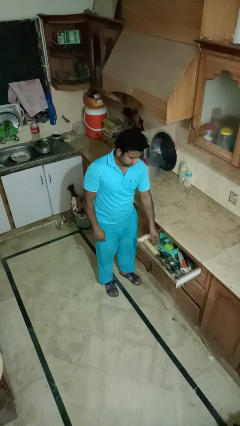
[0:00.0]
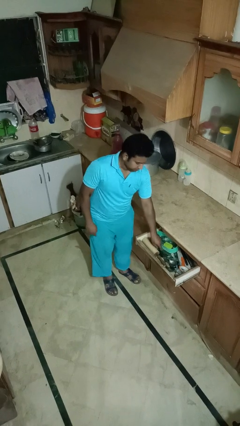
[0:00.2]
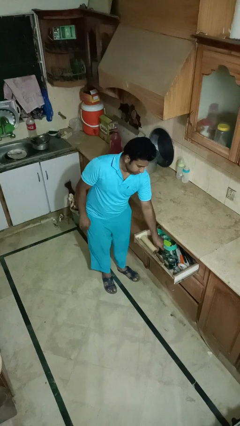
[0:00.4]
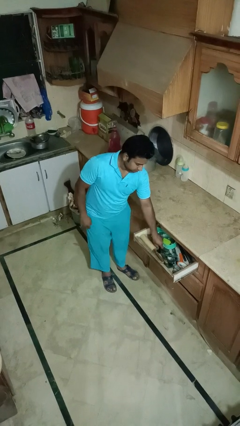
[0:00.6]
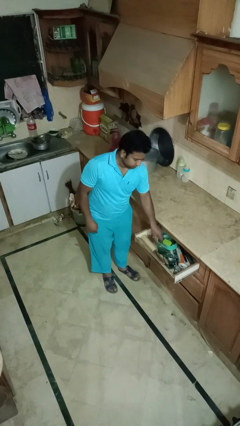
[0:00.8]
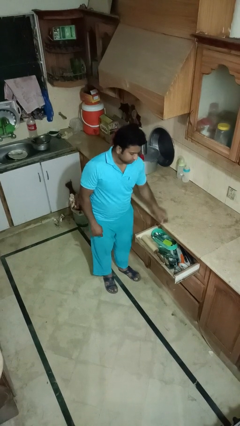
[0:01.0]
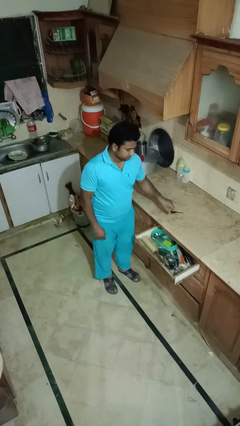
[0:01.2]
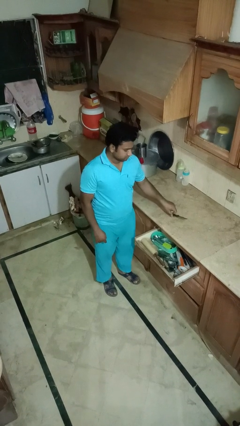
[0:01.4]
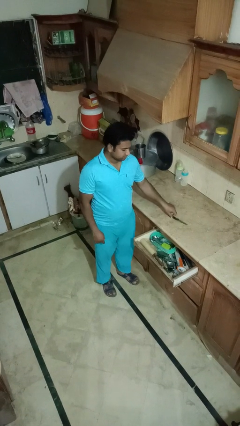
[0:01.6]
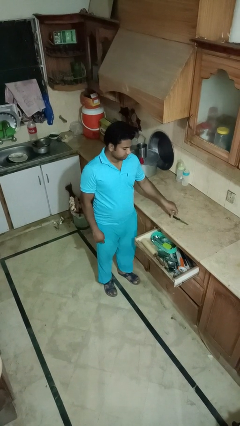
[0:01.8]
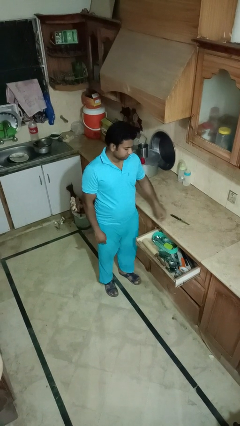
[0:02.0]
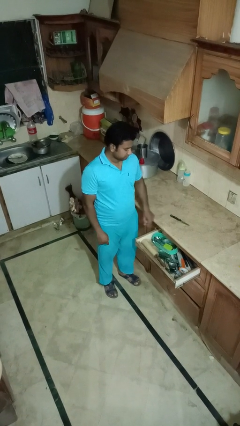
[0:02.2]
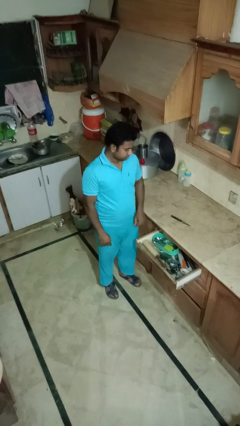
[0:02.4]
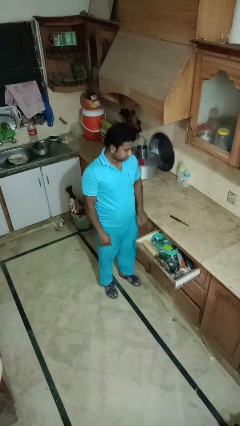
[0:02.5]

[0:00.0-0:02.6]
person takes object from kitchen drawer

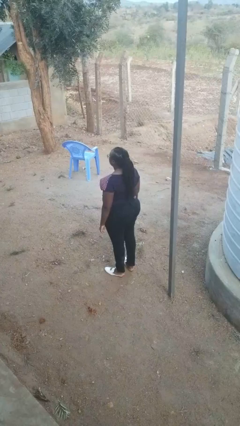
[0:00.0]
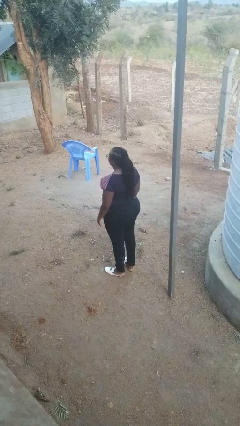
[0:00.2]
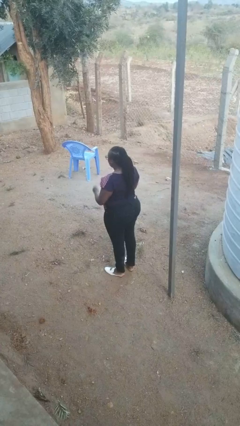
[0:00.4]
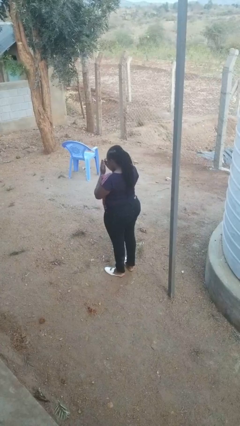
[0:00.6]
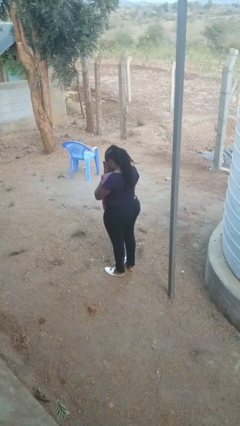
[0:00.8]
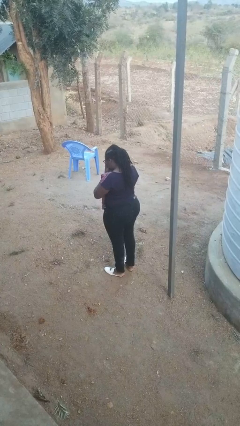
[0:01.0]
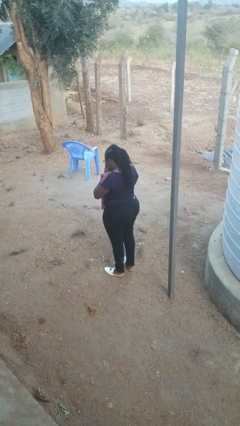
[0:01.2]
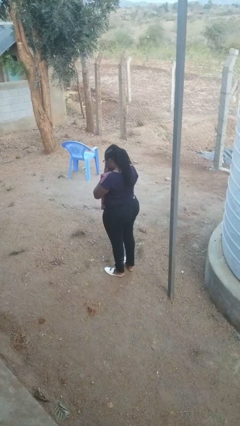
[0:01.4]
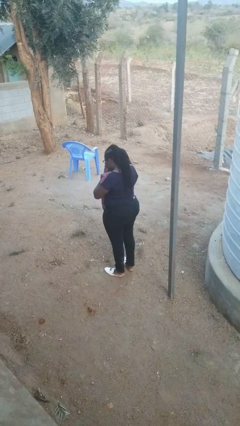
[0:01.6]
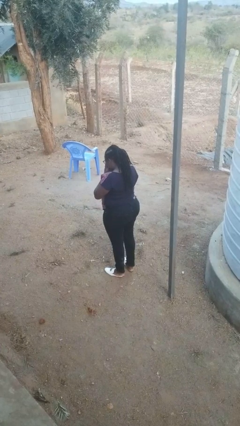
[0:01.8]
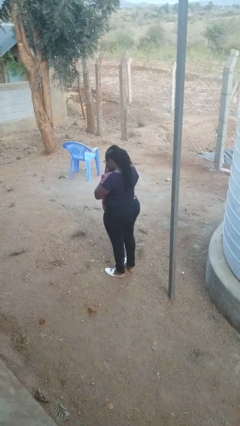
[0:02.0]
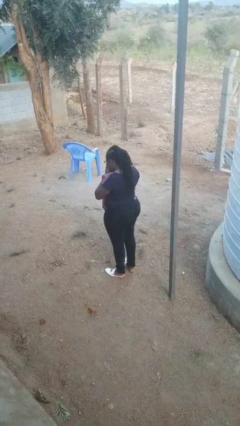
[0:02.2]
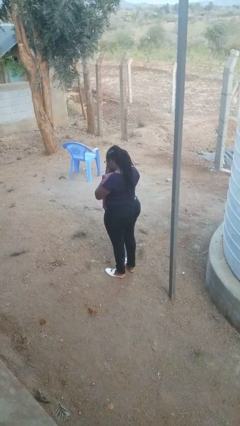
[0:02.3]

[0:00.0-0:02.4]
person sneezes into hand

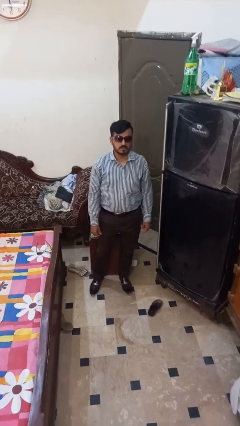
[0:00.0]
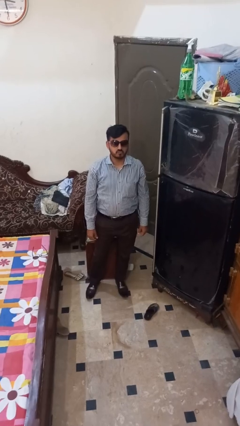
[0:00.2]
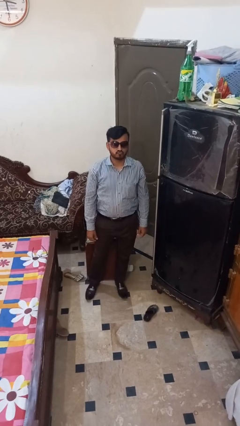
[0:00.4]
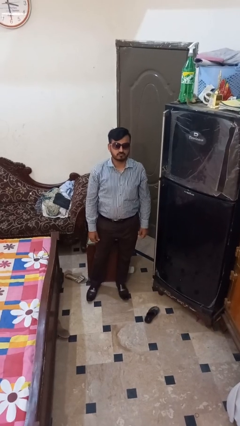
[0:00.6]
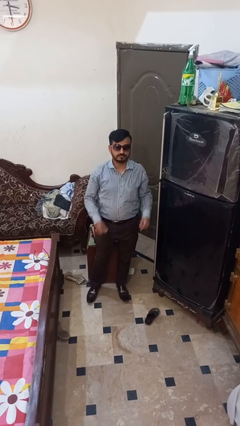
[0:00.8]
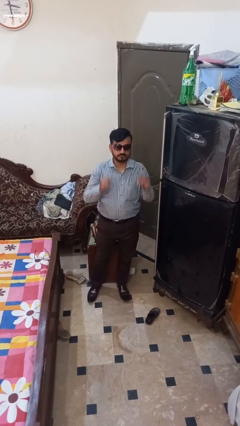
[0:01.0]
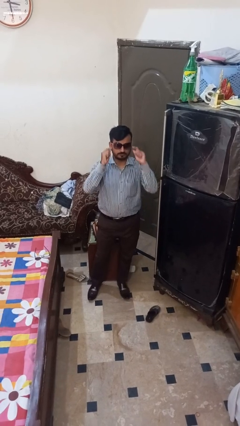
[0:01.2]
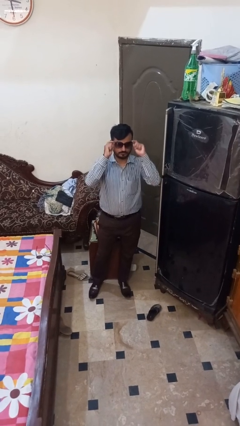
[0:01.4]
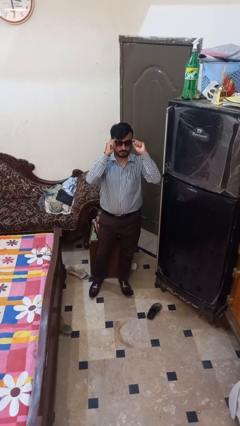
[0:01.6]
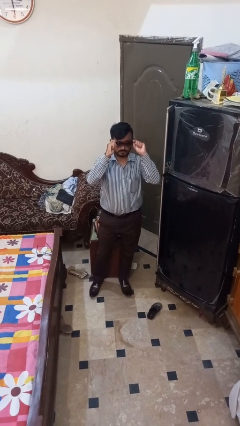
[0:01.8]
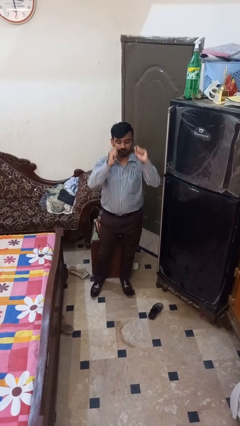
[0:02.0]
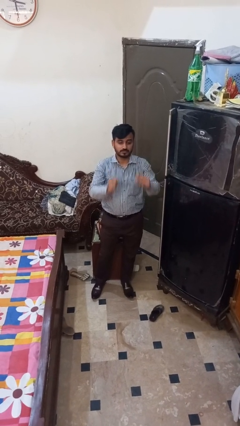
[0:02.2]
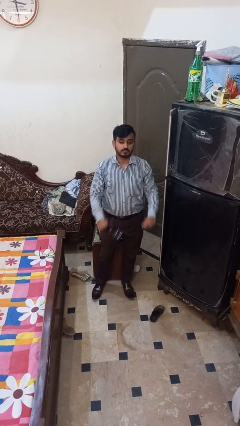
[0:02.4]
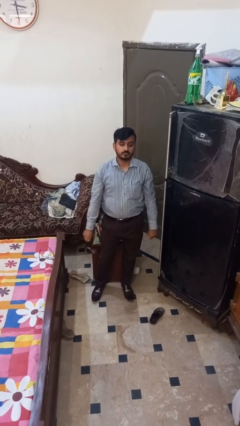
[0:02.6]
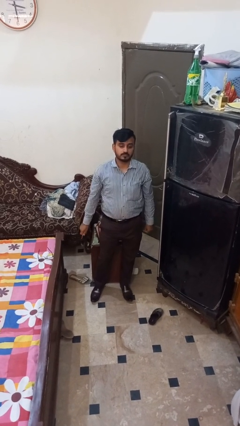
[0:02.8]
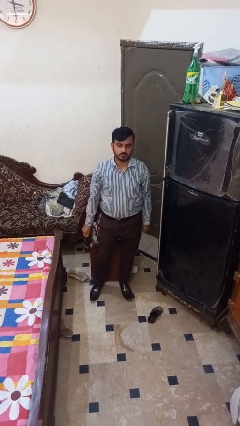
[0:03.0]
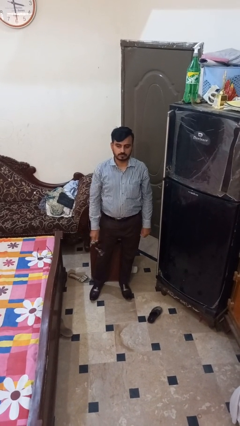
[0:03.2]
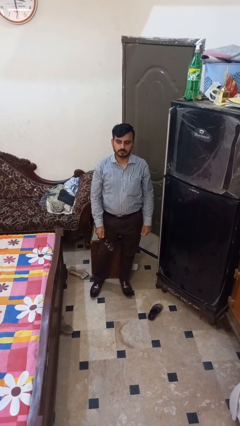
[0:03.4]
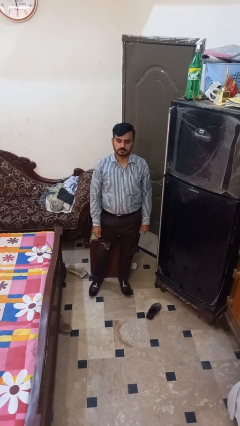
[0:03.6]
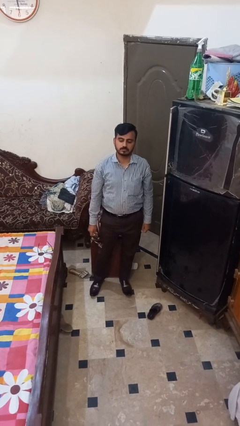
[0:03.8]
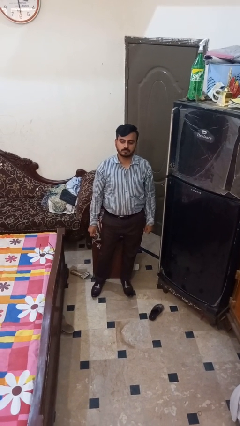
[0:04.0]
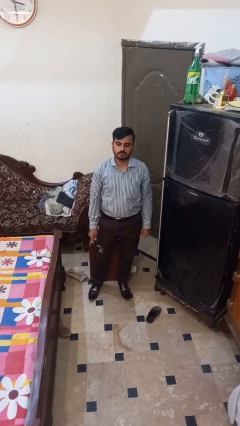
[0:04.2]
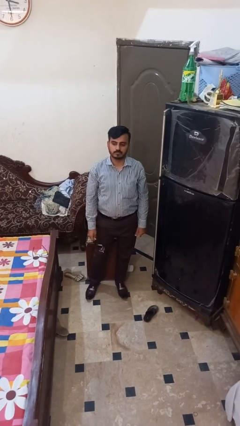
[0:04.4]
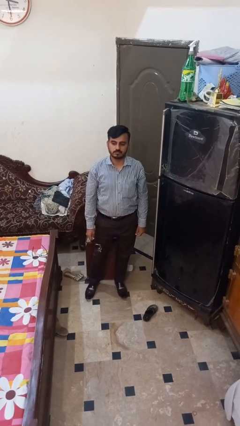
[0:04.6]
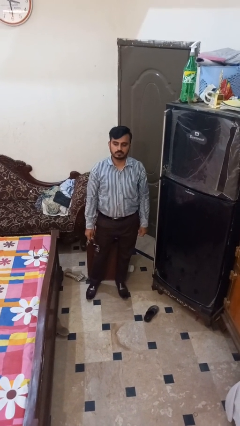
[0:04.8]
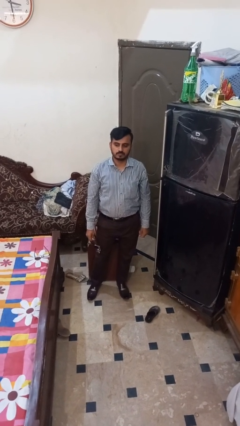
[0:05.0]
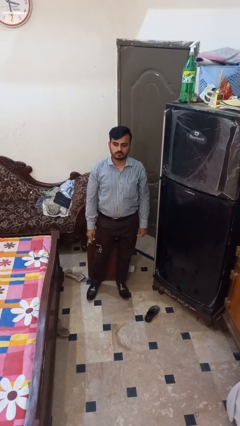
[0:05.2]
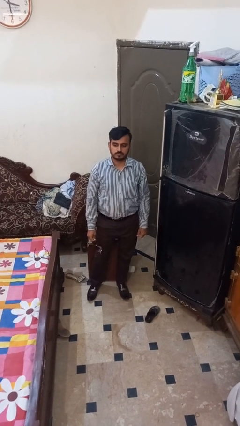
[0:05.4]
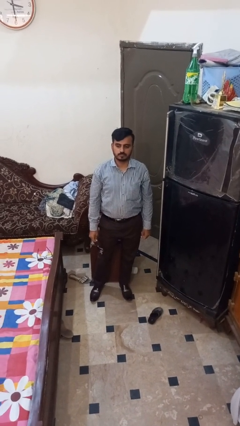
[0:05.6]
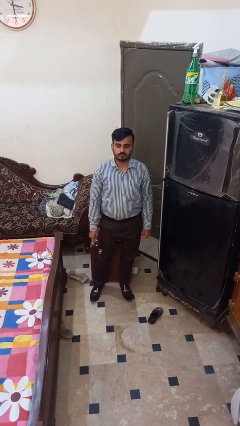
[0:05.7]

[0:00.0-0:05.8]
person takes off sunglasses

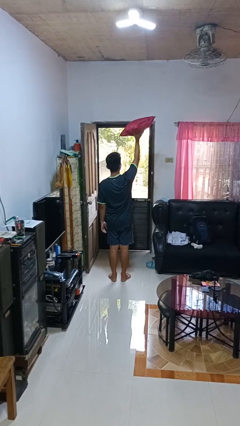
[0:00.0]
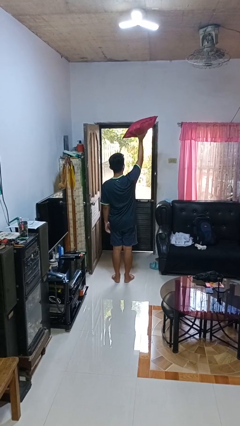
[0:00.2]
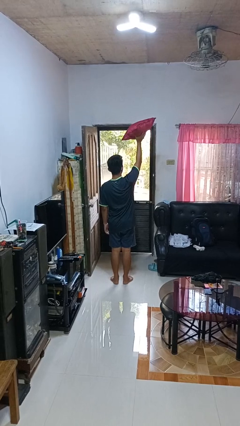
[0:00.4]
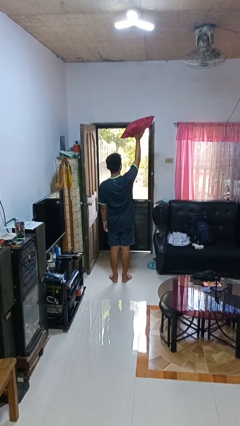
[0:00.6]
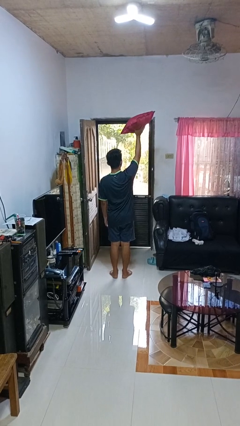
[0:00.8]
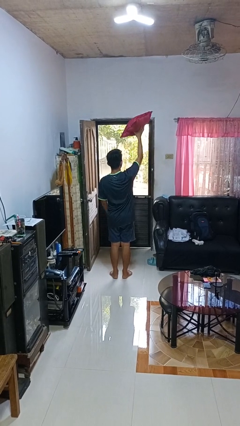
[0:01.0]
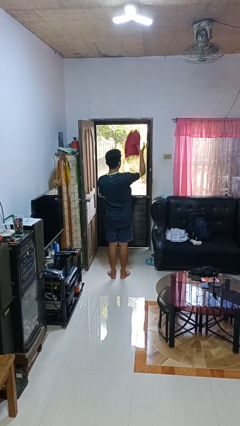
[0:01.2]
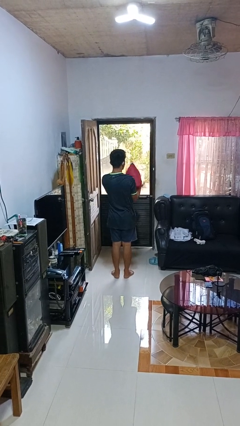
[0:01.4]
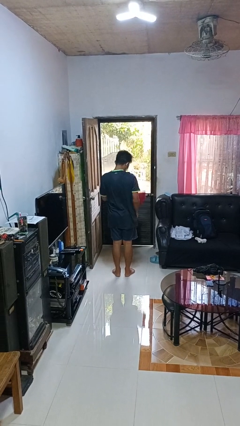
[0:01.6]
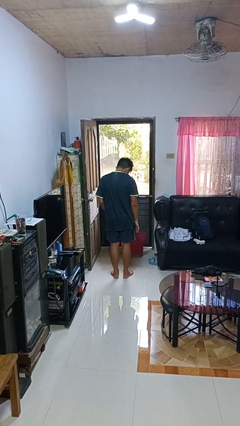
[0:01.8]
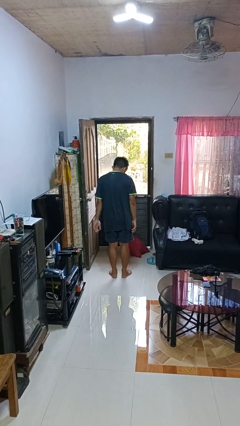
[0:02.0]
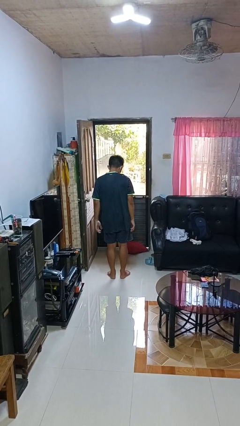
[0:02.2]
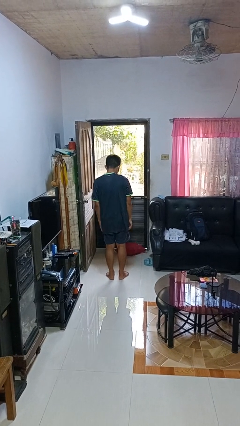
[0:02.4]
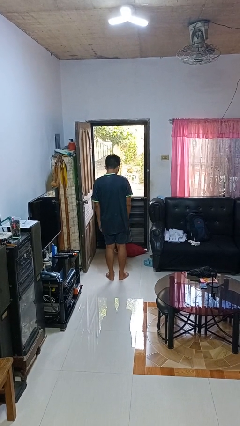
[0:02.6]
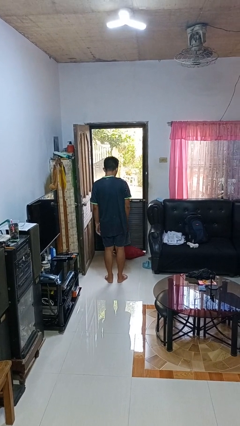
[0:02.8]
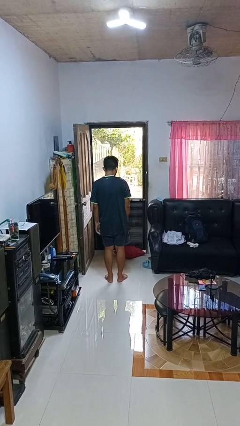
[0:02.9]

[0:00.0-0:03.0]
person drops object

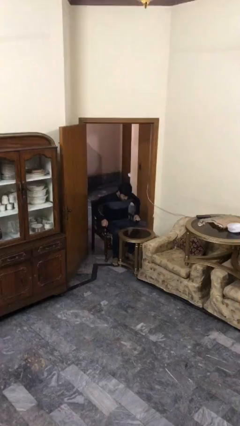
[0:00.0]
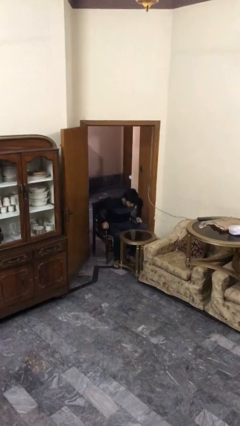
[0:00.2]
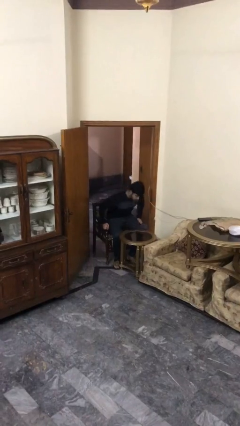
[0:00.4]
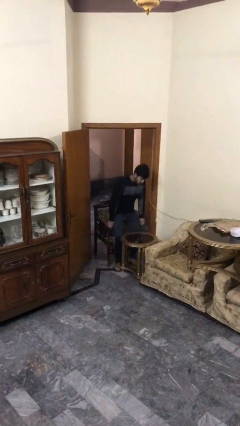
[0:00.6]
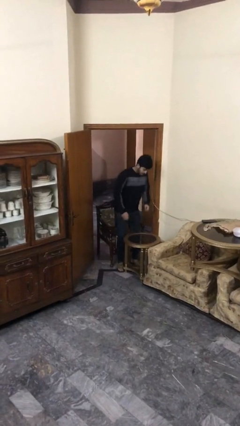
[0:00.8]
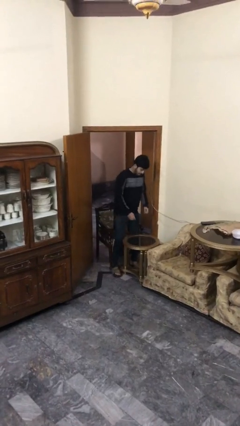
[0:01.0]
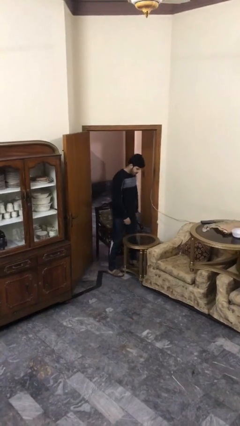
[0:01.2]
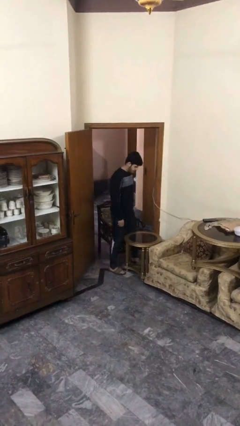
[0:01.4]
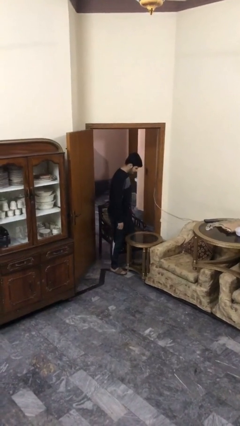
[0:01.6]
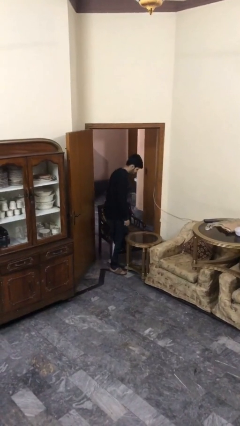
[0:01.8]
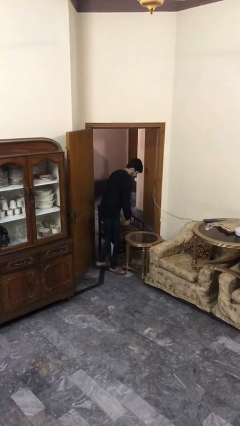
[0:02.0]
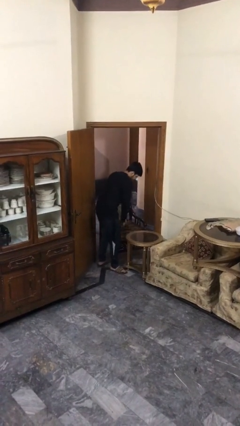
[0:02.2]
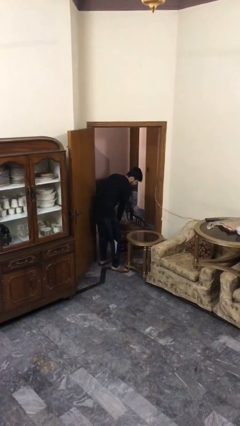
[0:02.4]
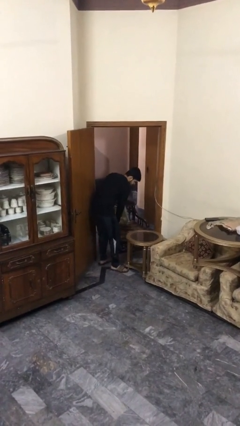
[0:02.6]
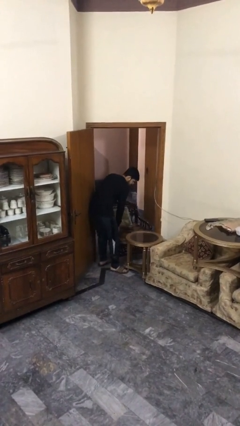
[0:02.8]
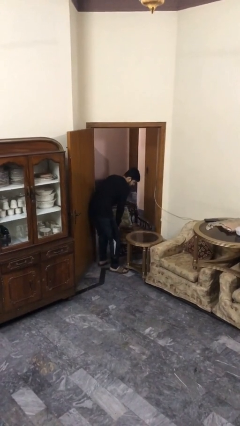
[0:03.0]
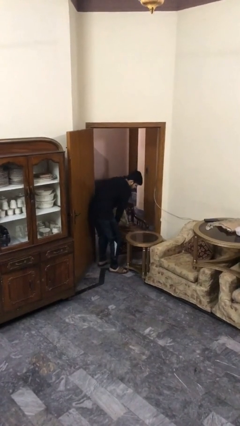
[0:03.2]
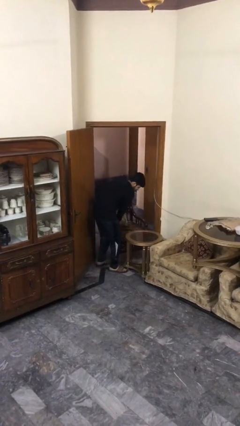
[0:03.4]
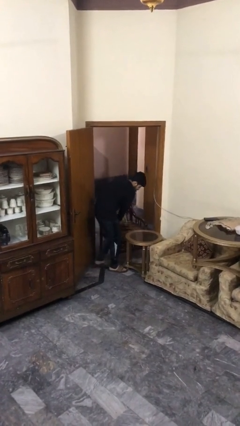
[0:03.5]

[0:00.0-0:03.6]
person stands up
